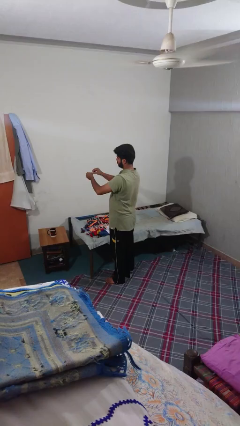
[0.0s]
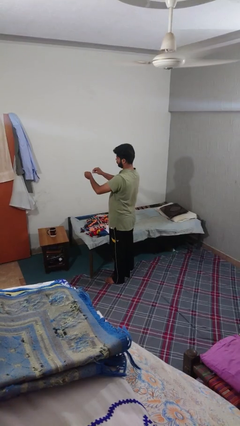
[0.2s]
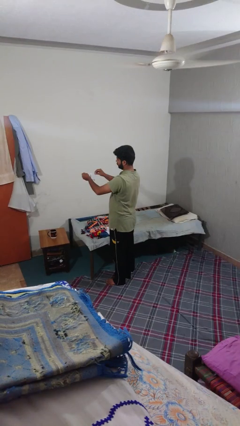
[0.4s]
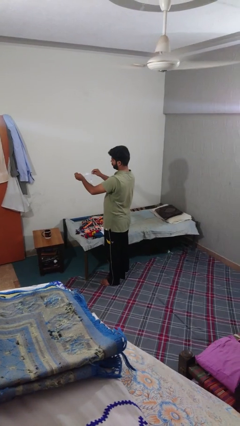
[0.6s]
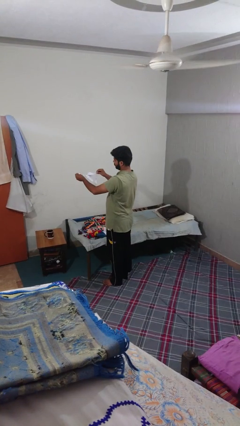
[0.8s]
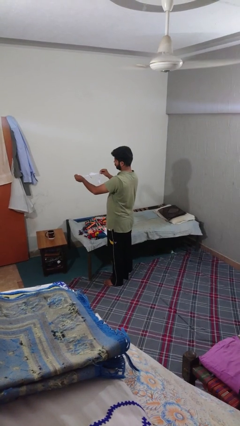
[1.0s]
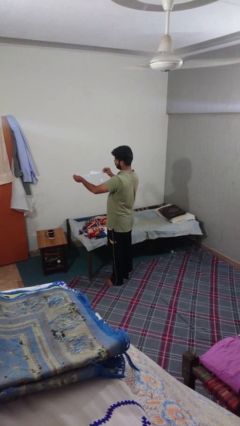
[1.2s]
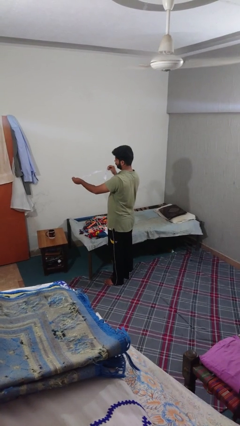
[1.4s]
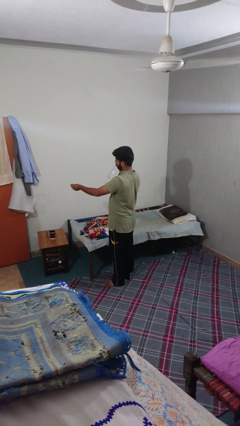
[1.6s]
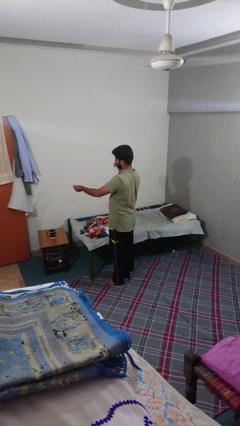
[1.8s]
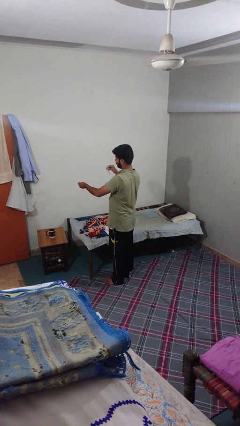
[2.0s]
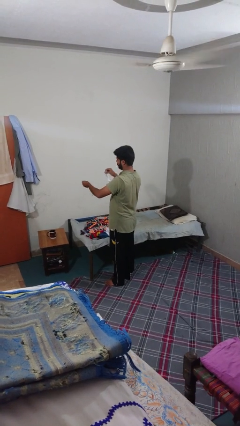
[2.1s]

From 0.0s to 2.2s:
person tears paper

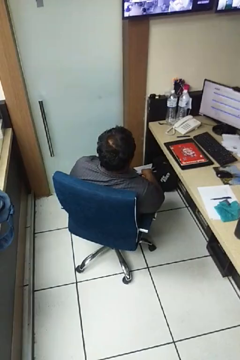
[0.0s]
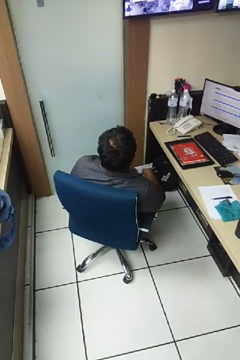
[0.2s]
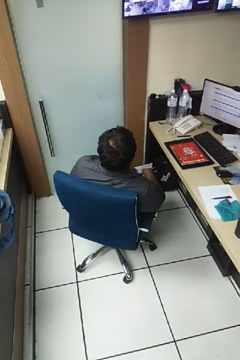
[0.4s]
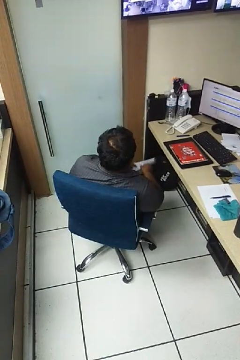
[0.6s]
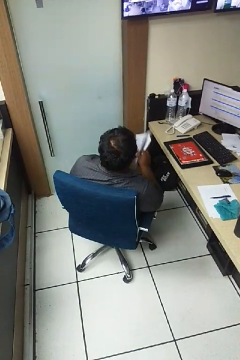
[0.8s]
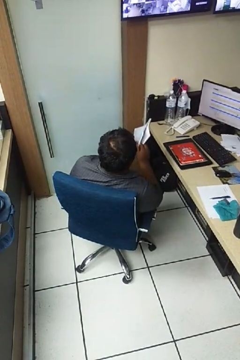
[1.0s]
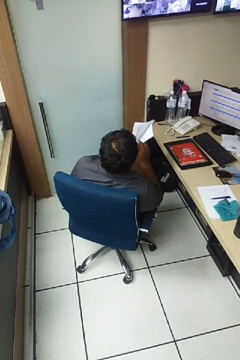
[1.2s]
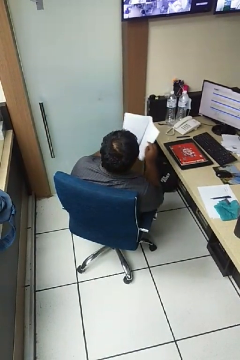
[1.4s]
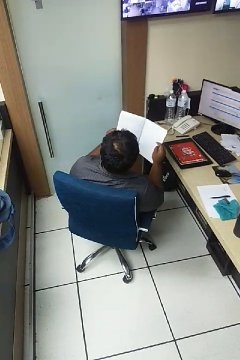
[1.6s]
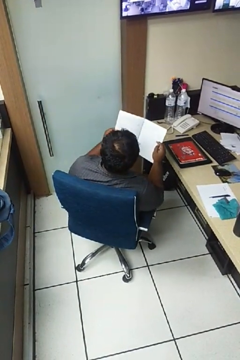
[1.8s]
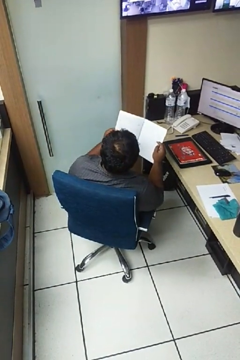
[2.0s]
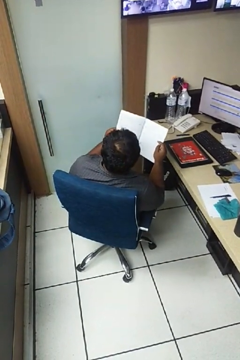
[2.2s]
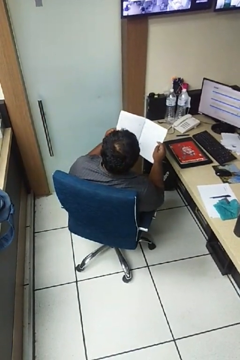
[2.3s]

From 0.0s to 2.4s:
person reads book

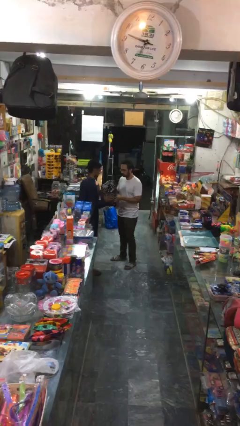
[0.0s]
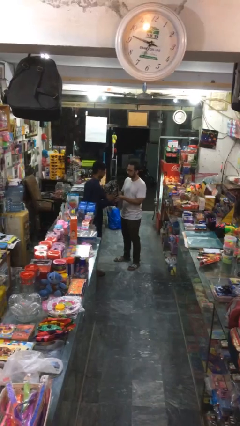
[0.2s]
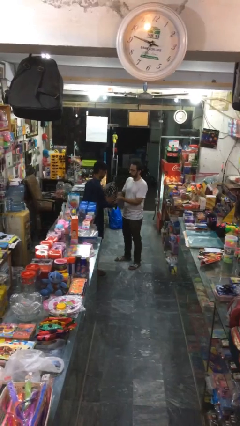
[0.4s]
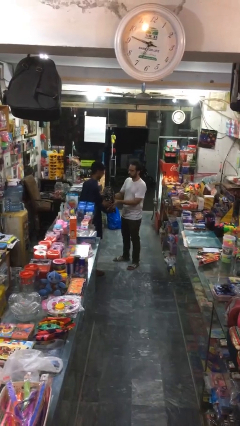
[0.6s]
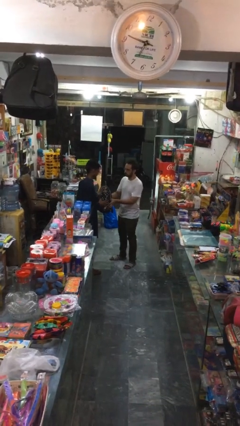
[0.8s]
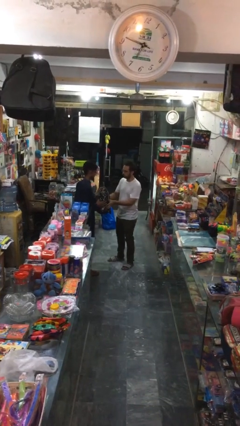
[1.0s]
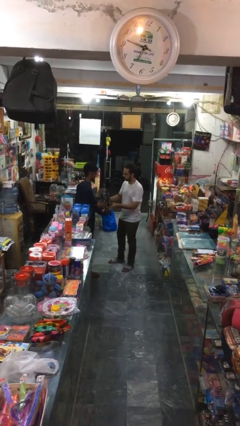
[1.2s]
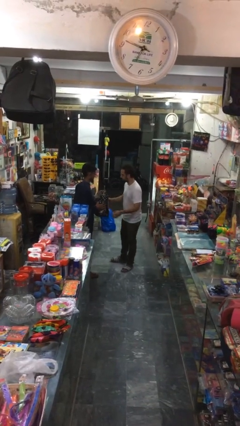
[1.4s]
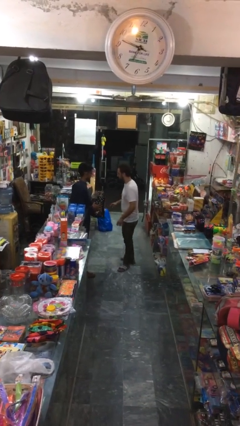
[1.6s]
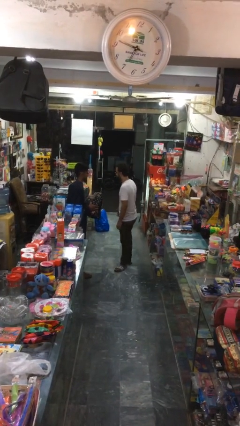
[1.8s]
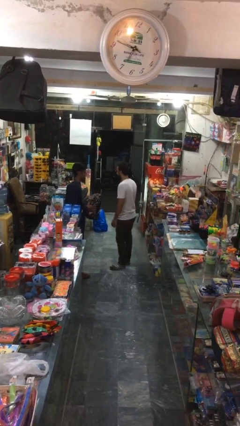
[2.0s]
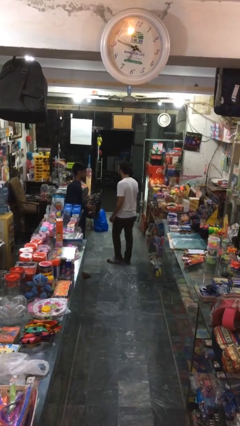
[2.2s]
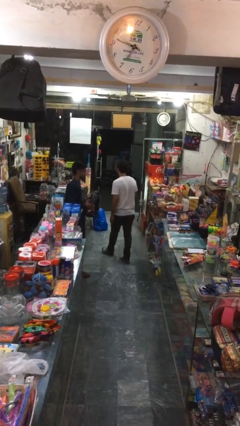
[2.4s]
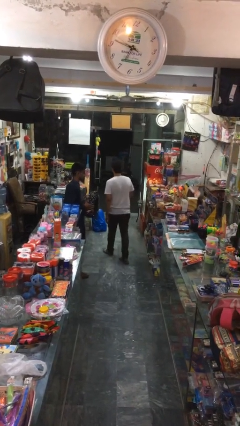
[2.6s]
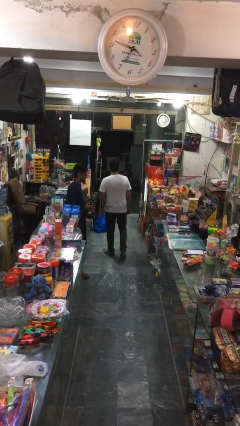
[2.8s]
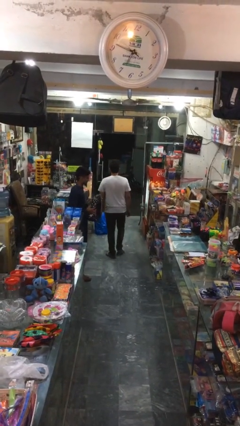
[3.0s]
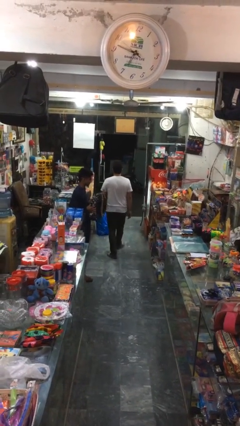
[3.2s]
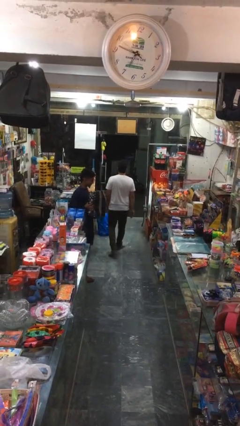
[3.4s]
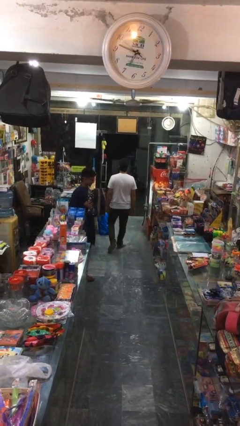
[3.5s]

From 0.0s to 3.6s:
person transfers object to person

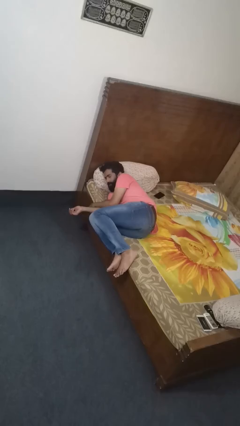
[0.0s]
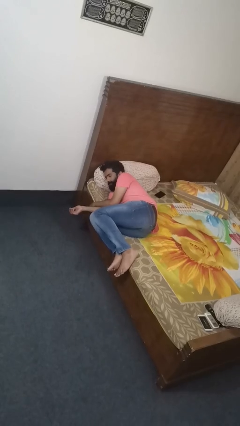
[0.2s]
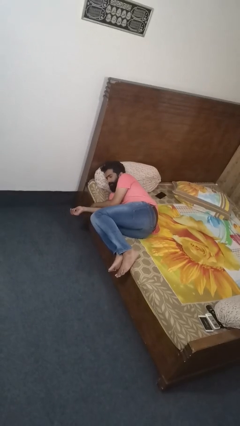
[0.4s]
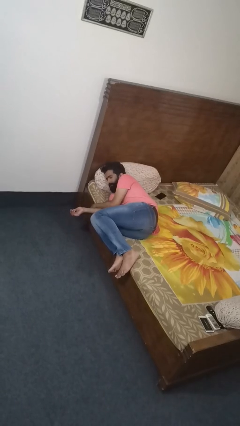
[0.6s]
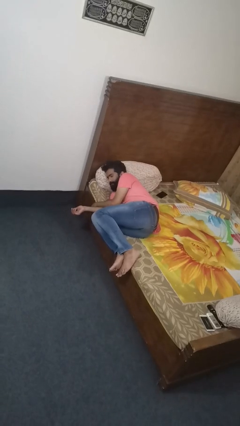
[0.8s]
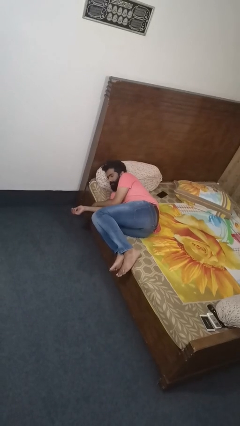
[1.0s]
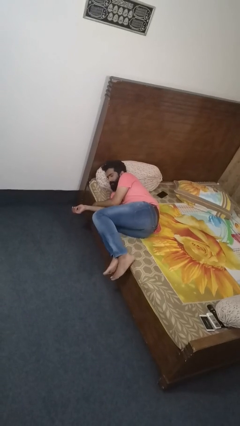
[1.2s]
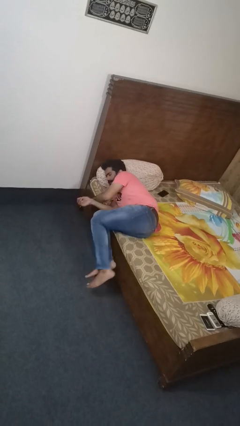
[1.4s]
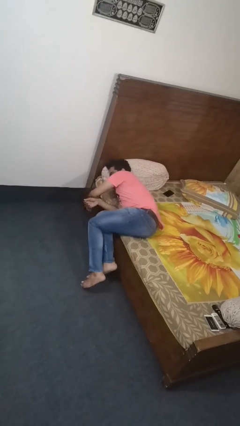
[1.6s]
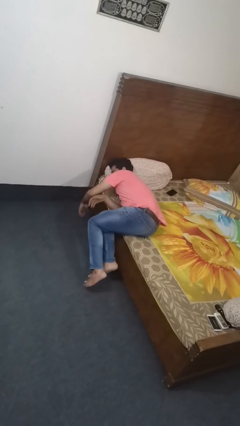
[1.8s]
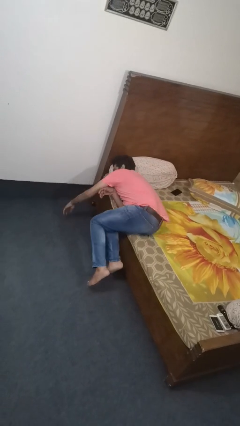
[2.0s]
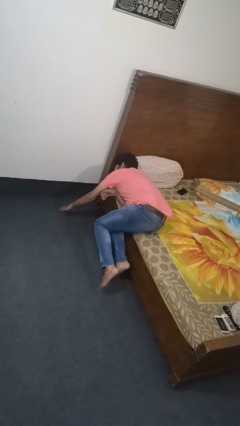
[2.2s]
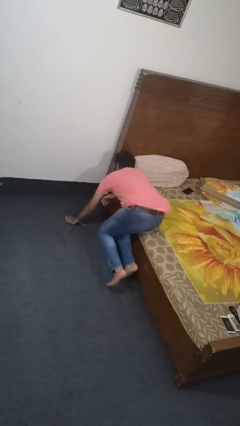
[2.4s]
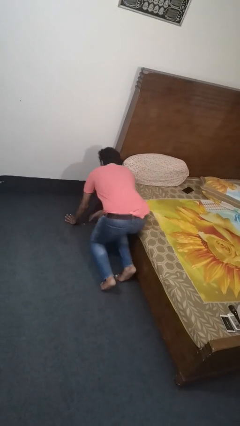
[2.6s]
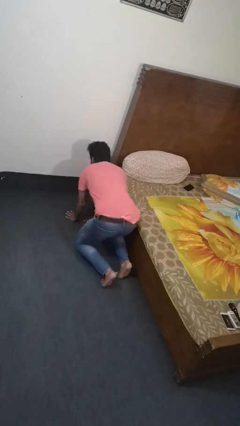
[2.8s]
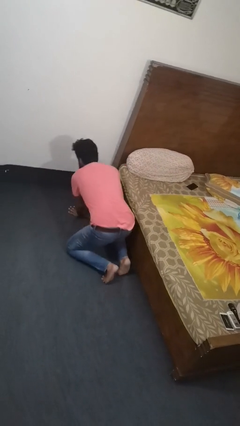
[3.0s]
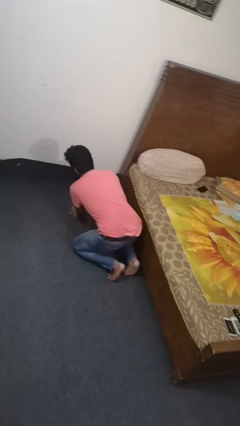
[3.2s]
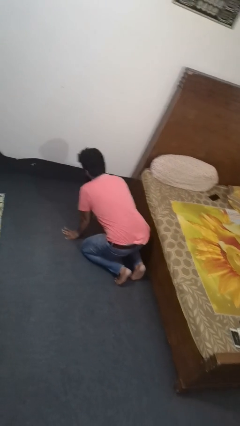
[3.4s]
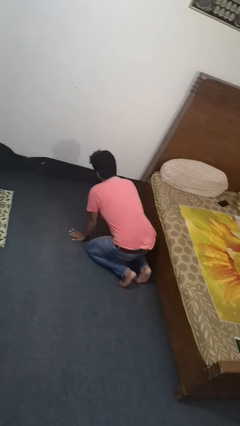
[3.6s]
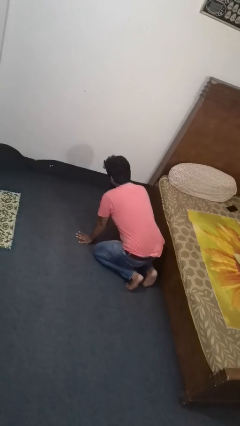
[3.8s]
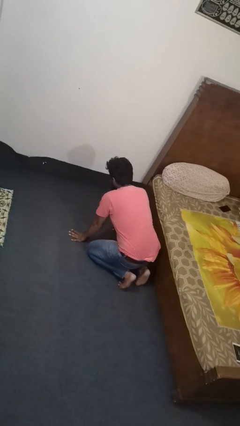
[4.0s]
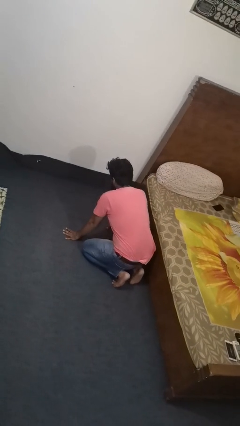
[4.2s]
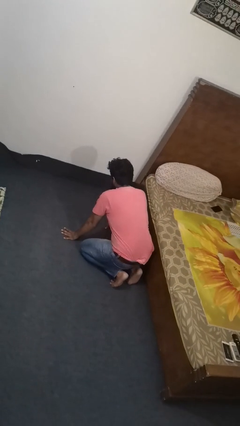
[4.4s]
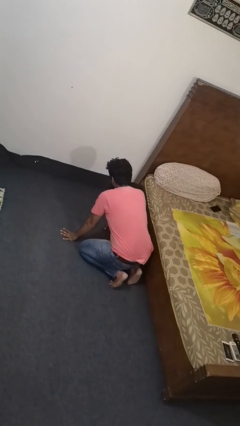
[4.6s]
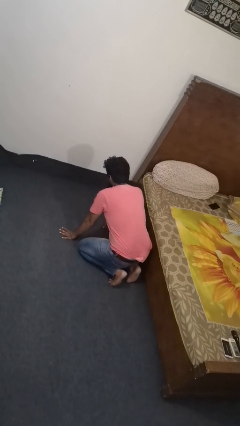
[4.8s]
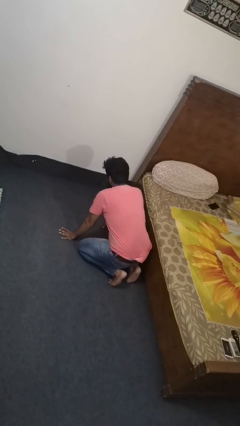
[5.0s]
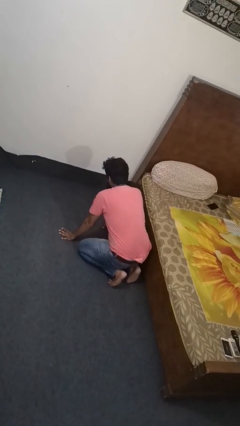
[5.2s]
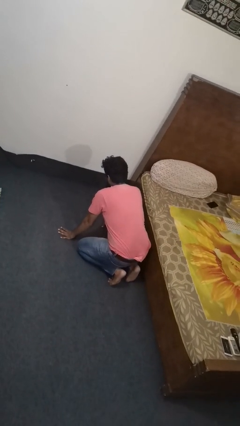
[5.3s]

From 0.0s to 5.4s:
person falls from bed

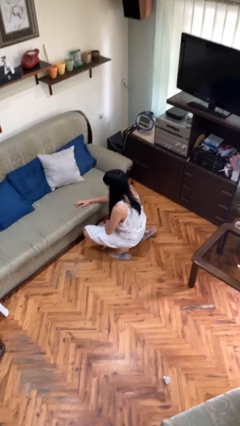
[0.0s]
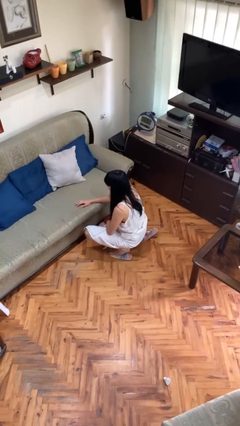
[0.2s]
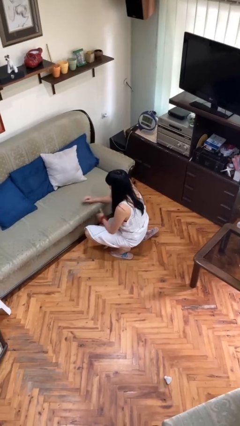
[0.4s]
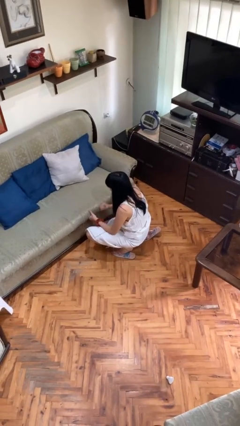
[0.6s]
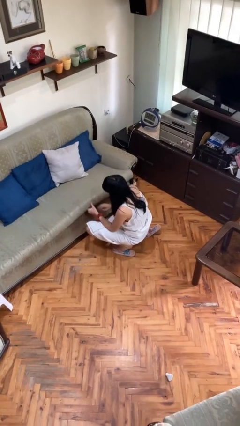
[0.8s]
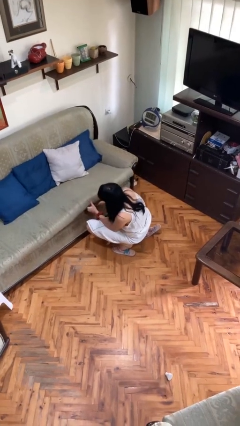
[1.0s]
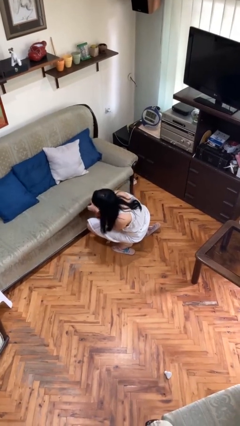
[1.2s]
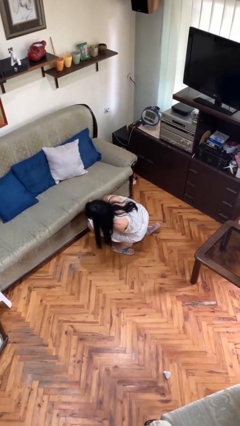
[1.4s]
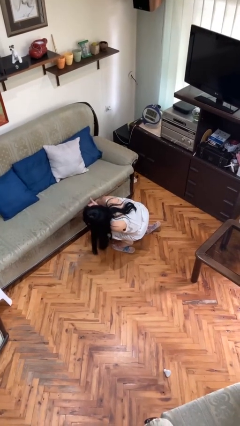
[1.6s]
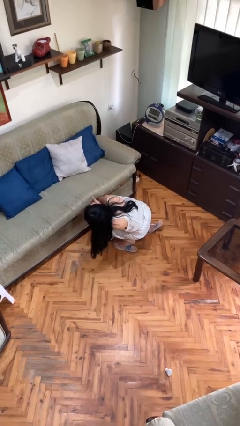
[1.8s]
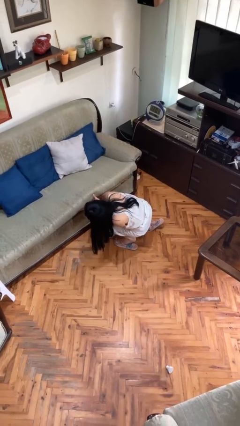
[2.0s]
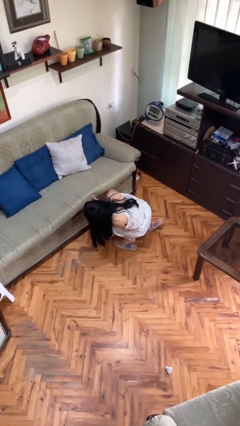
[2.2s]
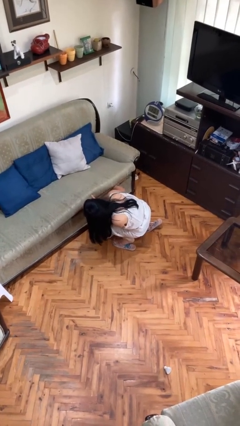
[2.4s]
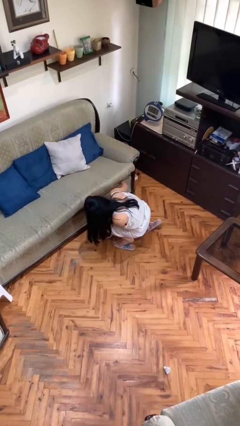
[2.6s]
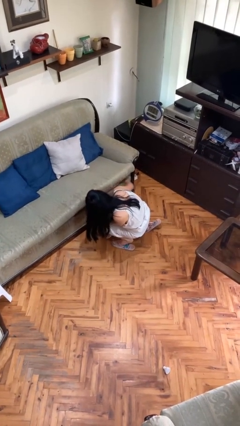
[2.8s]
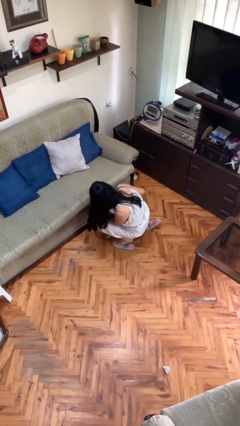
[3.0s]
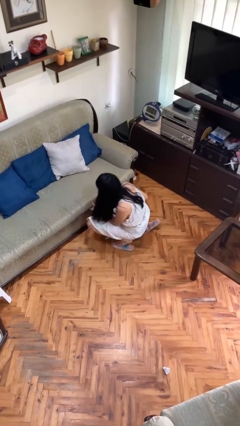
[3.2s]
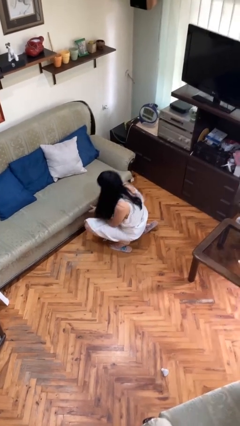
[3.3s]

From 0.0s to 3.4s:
person searches under couch

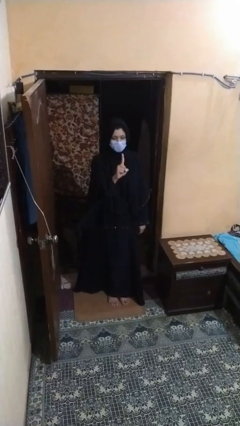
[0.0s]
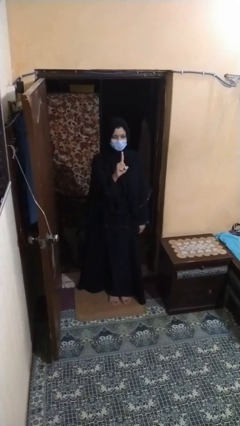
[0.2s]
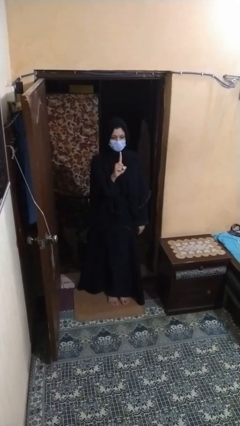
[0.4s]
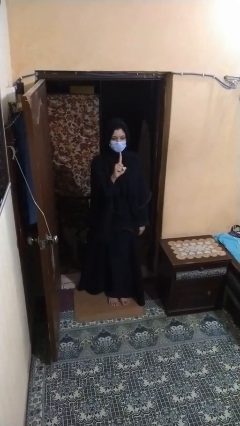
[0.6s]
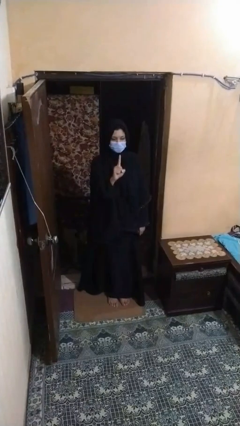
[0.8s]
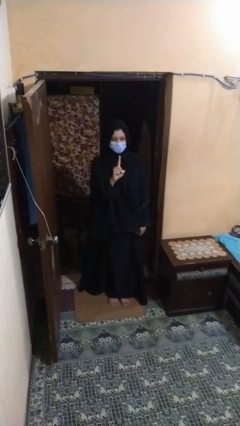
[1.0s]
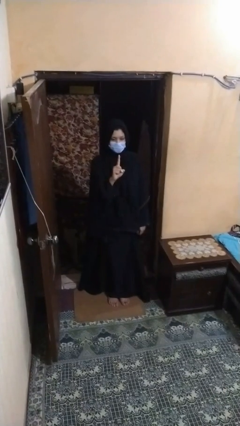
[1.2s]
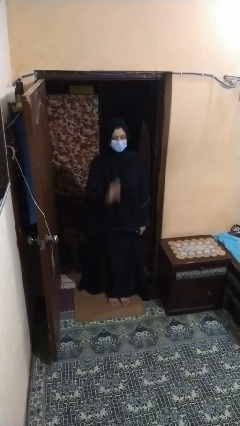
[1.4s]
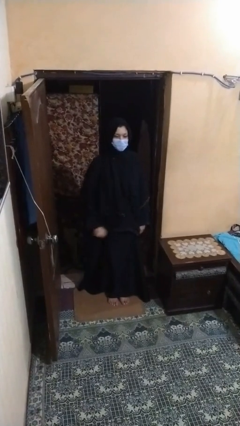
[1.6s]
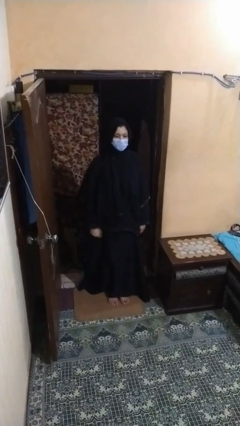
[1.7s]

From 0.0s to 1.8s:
person gestures number one
